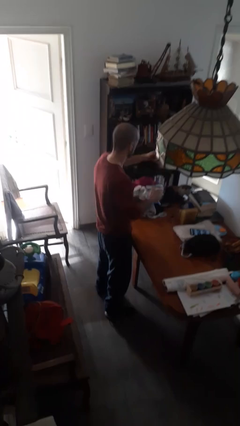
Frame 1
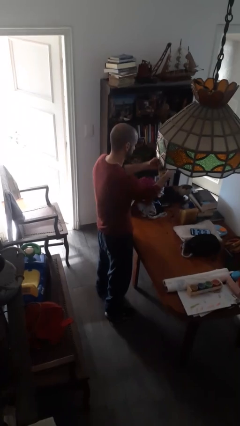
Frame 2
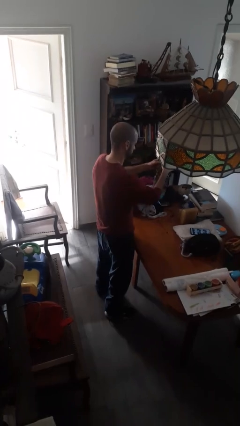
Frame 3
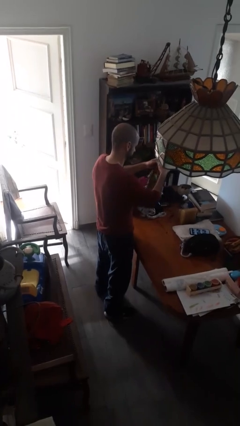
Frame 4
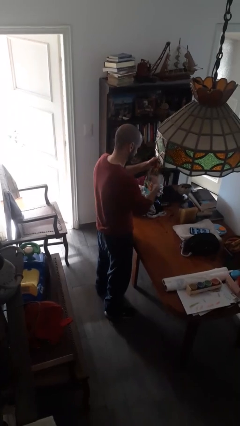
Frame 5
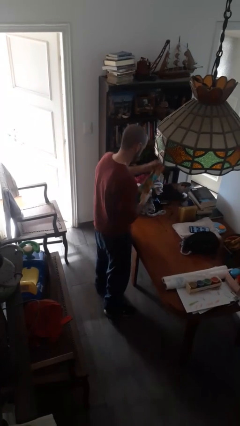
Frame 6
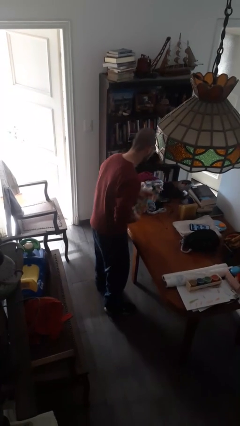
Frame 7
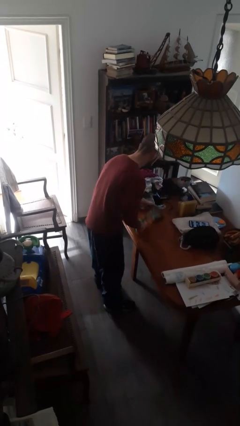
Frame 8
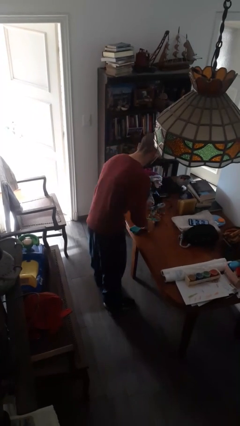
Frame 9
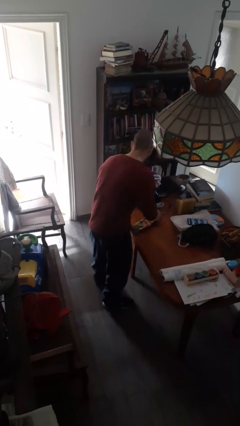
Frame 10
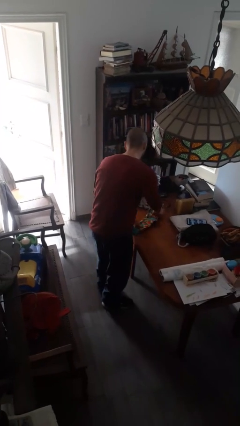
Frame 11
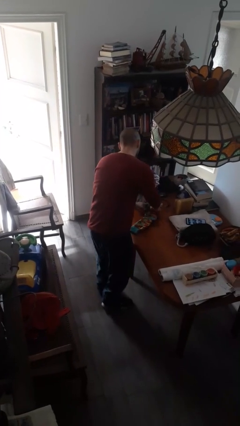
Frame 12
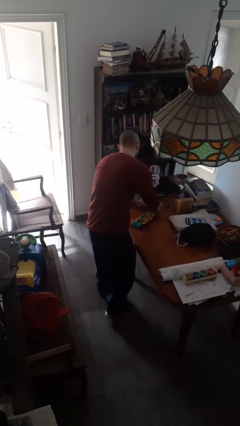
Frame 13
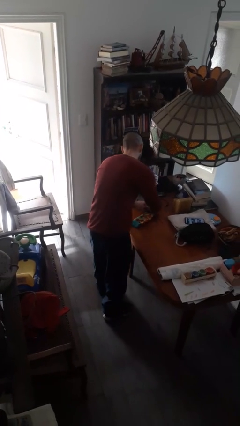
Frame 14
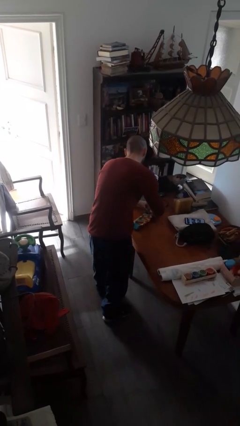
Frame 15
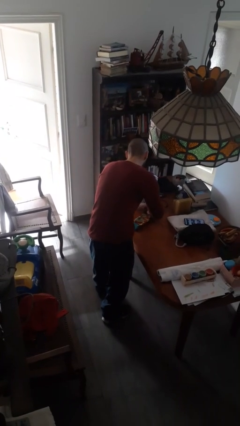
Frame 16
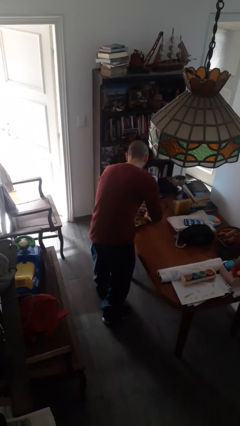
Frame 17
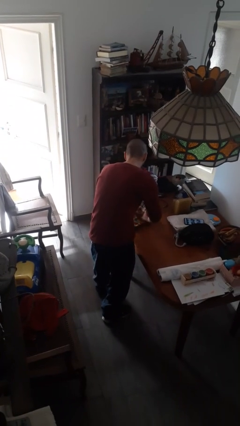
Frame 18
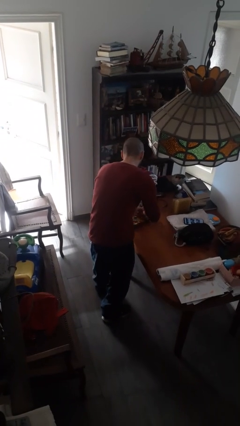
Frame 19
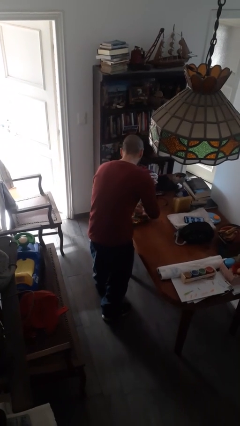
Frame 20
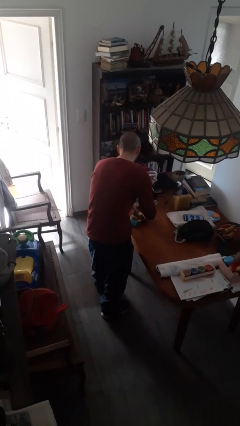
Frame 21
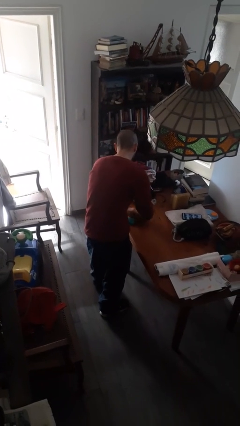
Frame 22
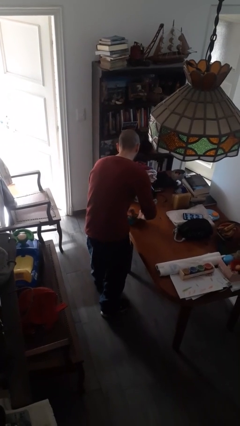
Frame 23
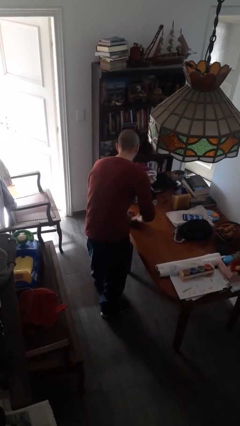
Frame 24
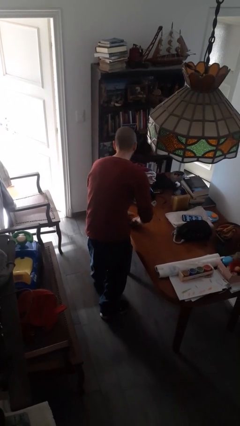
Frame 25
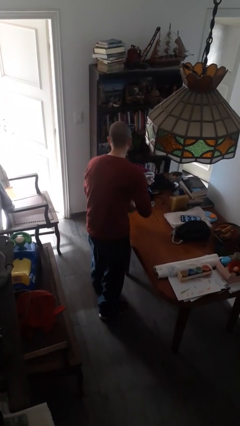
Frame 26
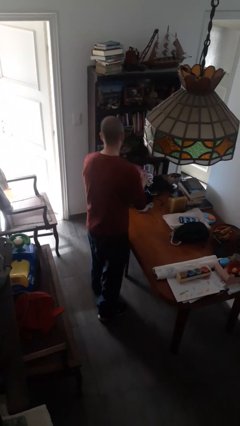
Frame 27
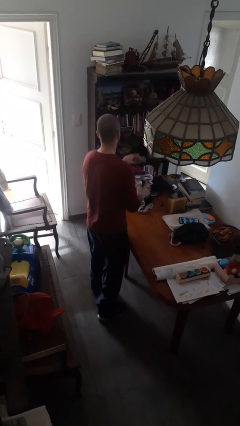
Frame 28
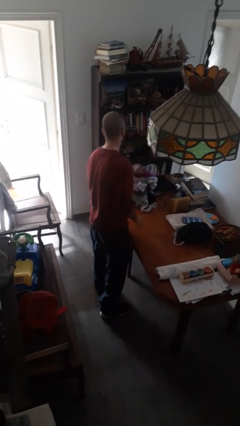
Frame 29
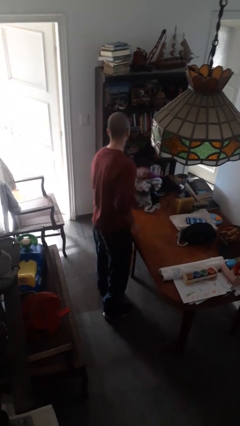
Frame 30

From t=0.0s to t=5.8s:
person folds socks

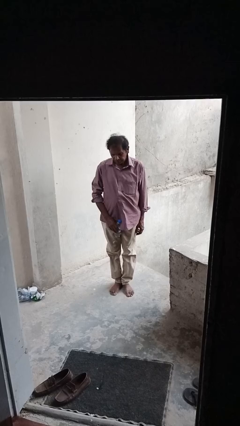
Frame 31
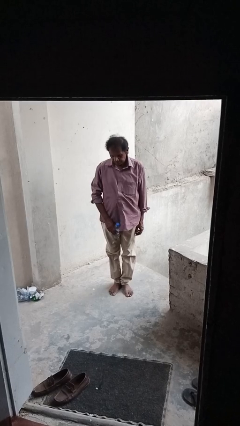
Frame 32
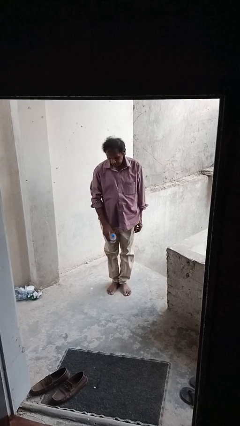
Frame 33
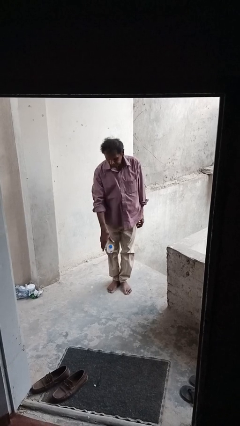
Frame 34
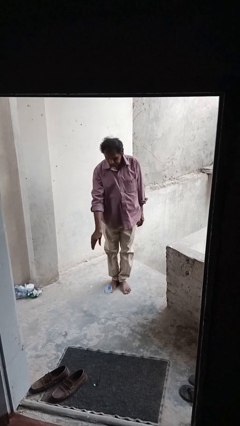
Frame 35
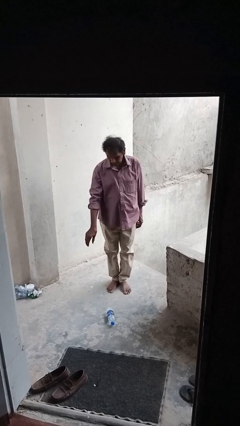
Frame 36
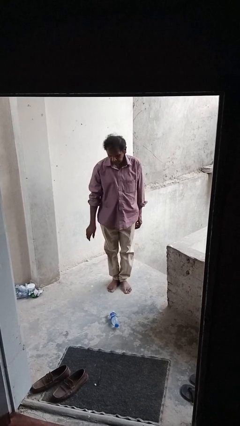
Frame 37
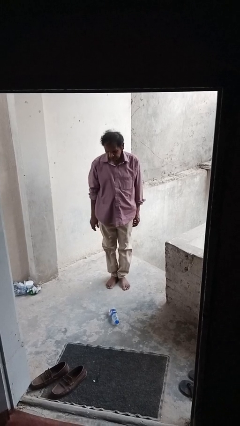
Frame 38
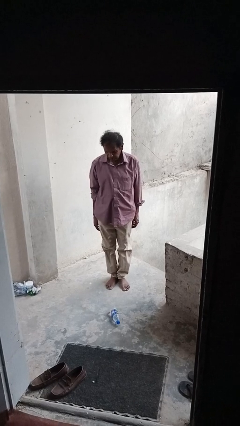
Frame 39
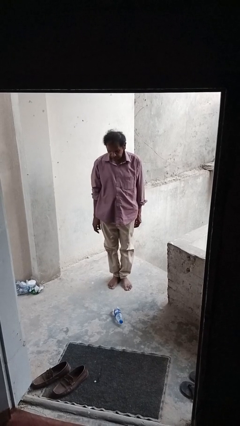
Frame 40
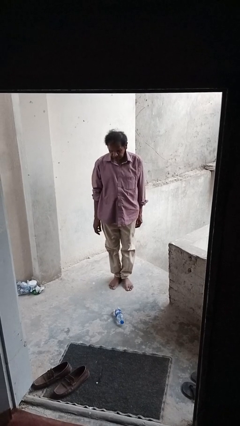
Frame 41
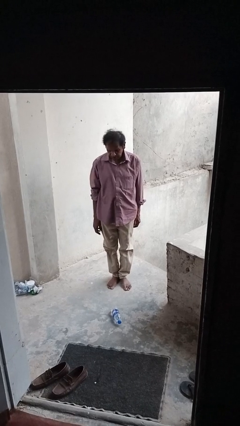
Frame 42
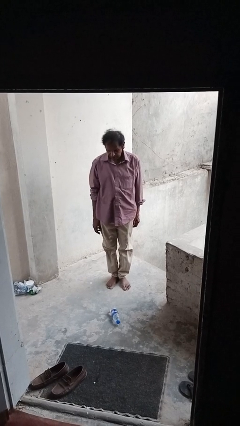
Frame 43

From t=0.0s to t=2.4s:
person throws object to ground

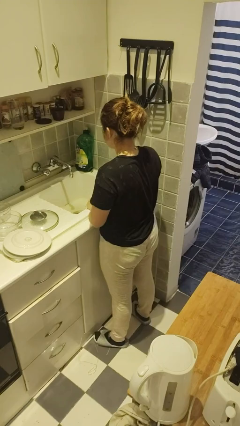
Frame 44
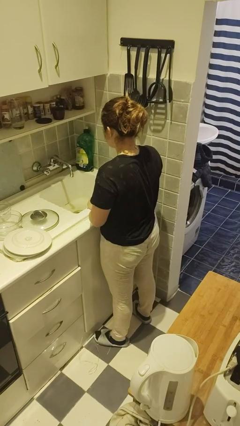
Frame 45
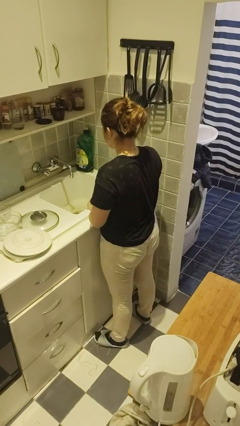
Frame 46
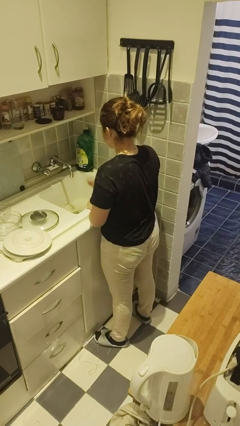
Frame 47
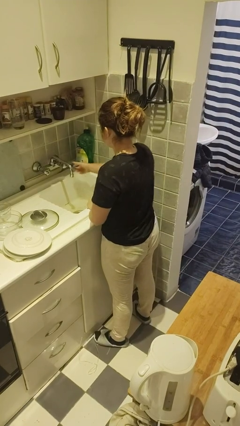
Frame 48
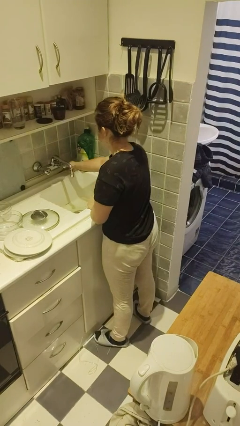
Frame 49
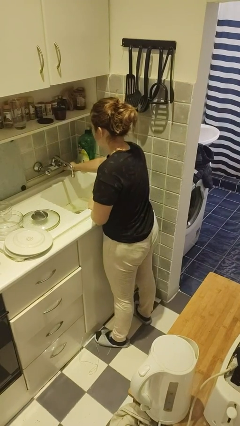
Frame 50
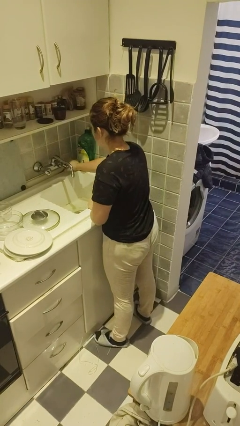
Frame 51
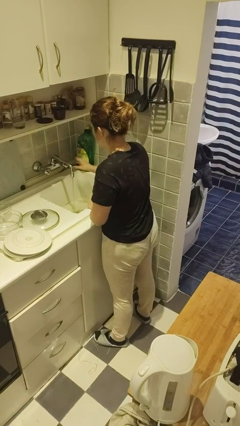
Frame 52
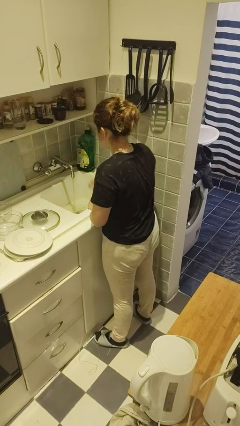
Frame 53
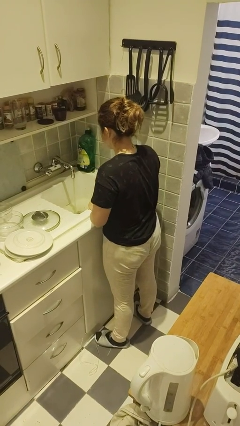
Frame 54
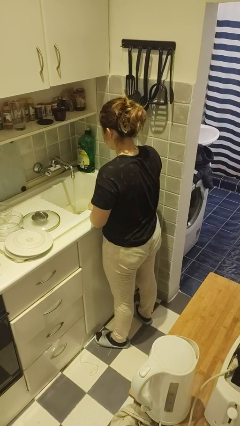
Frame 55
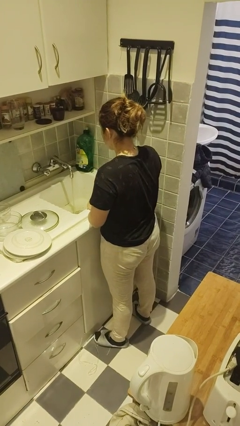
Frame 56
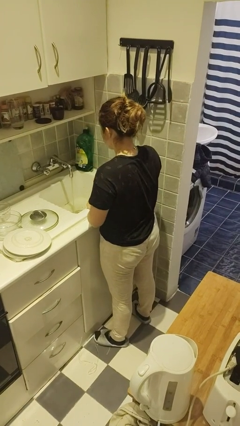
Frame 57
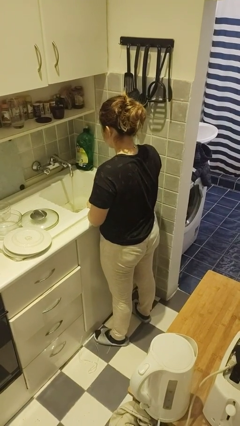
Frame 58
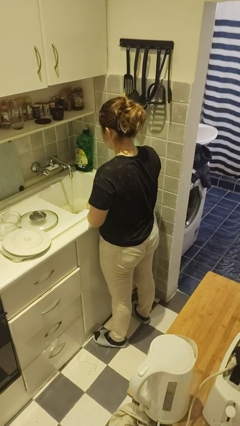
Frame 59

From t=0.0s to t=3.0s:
person turns on faucet

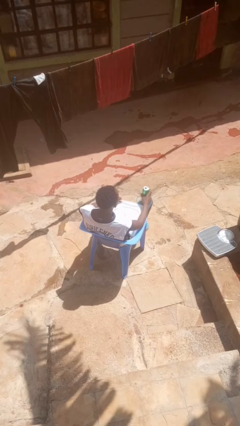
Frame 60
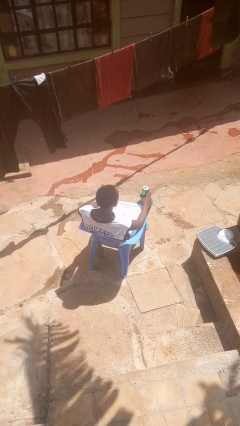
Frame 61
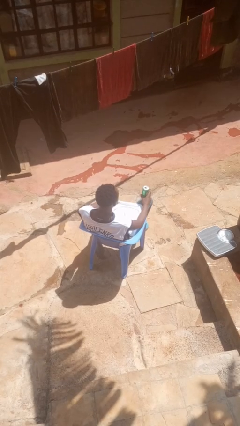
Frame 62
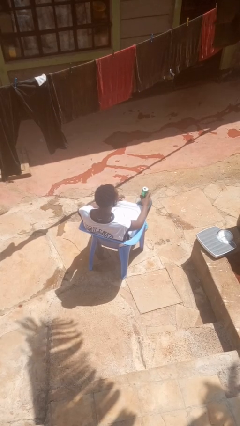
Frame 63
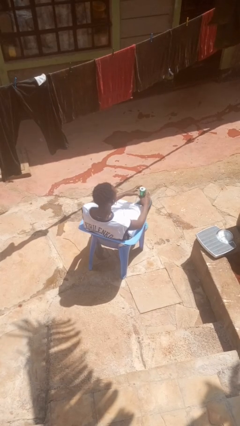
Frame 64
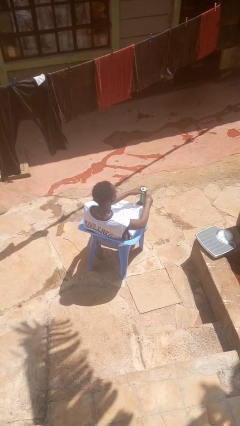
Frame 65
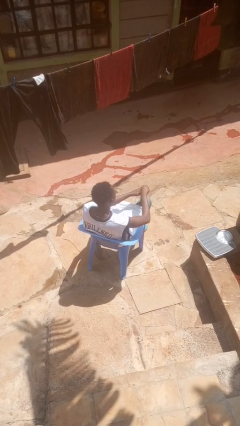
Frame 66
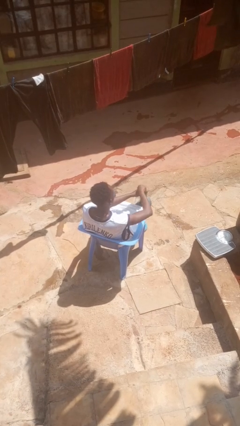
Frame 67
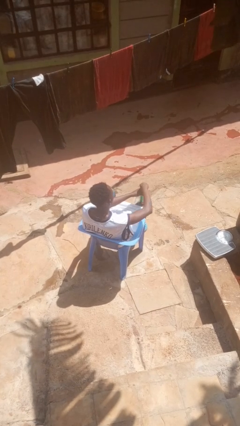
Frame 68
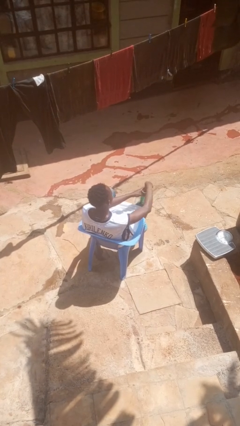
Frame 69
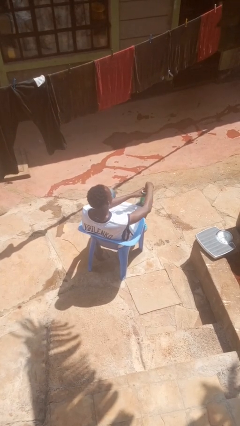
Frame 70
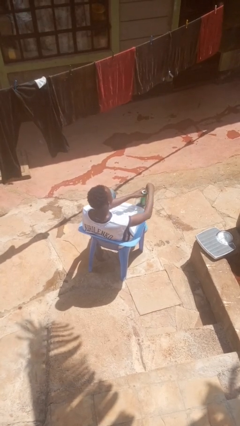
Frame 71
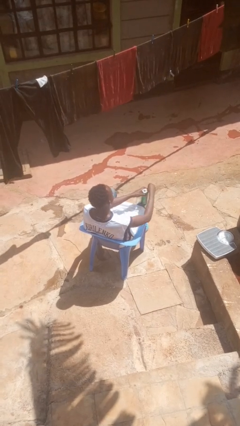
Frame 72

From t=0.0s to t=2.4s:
person opens beverage can

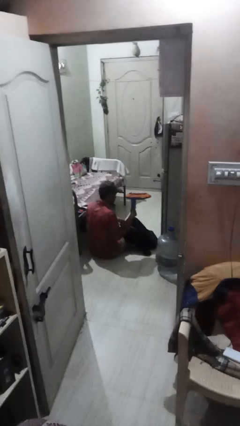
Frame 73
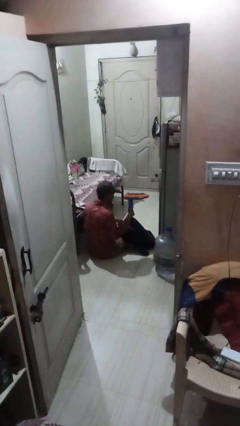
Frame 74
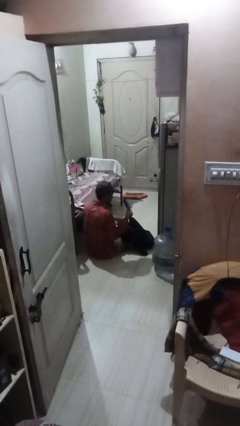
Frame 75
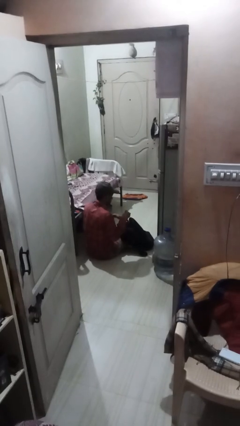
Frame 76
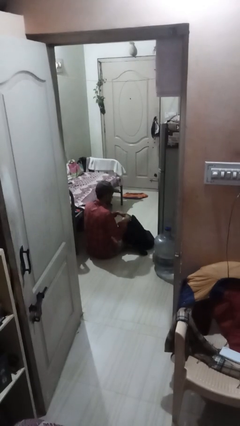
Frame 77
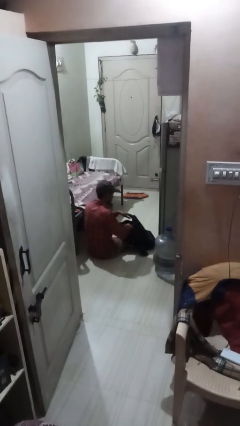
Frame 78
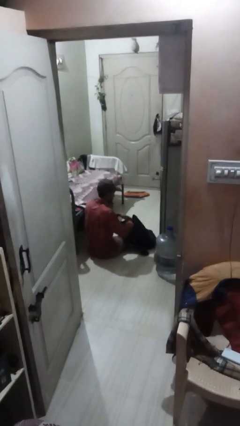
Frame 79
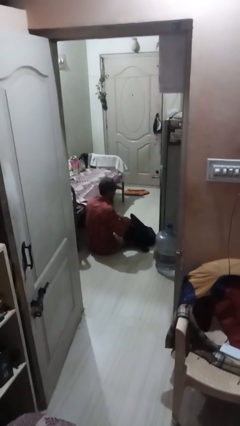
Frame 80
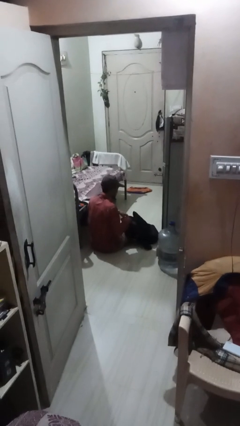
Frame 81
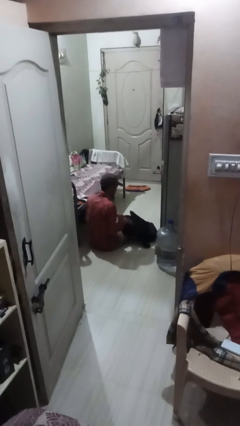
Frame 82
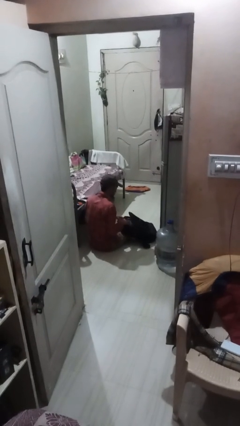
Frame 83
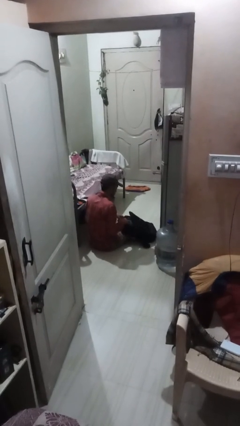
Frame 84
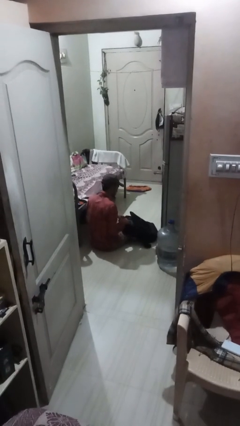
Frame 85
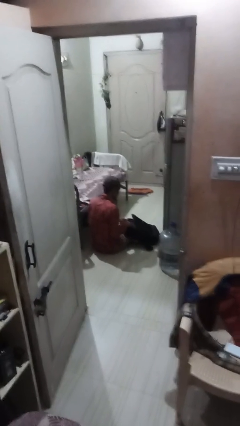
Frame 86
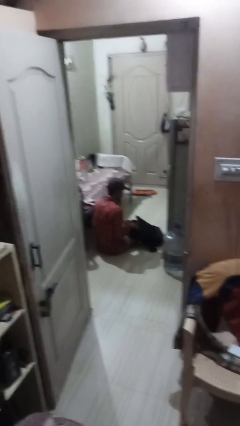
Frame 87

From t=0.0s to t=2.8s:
person puts object into backpack

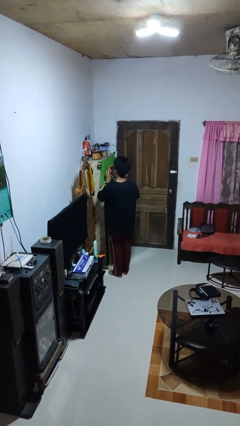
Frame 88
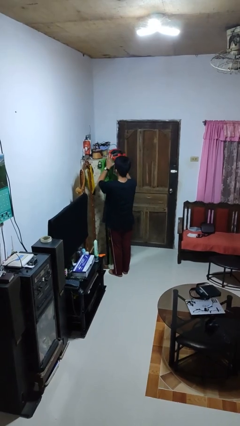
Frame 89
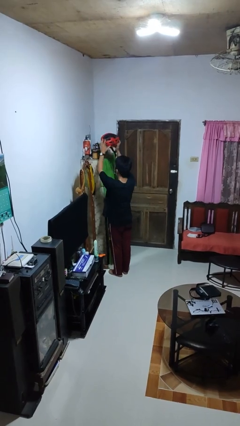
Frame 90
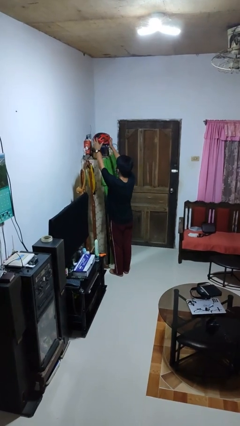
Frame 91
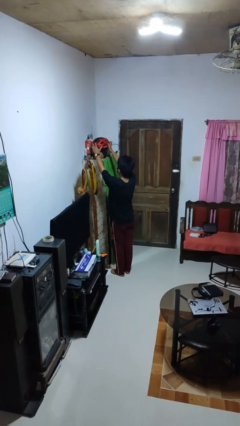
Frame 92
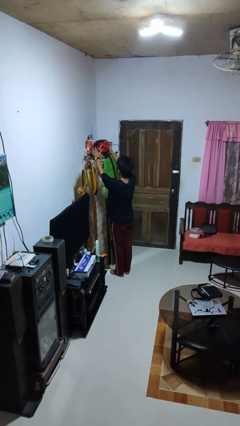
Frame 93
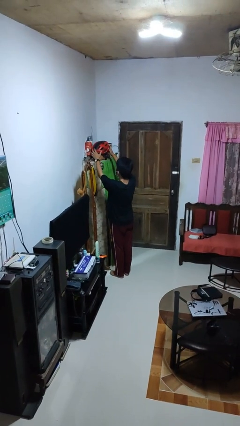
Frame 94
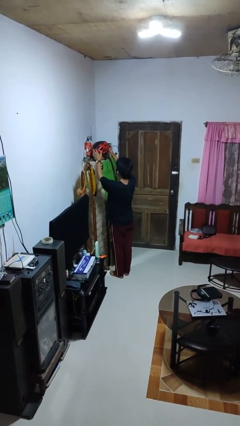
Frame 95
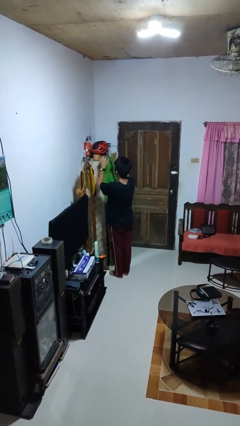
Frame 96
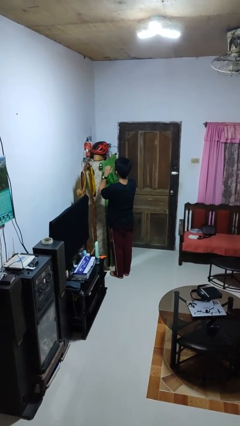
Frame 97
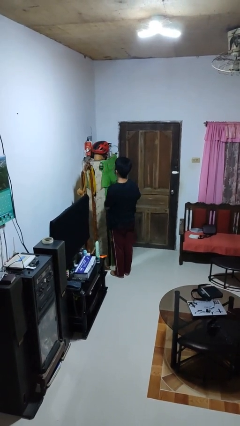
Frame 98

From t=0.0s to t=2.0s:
person puts down object on shelf
